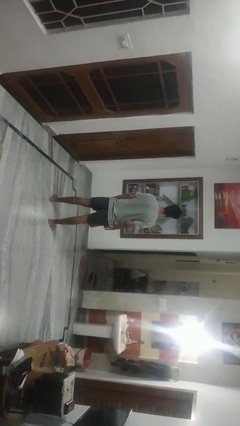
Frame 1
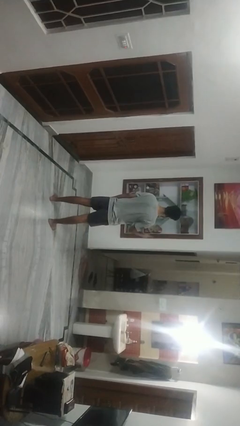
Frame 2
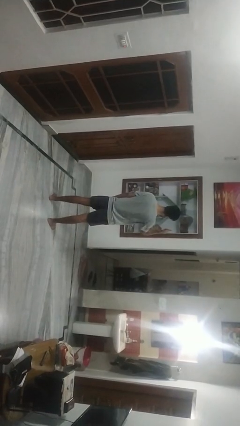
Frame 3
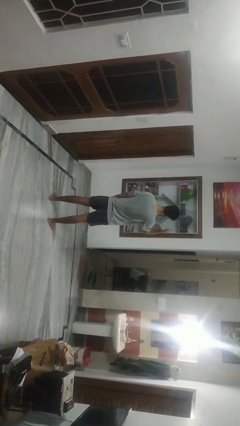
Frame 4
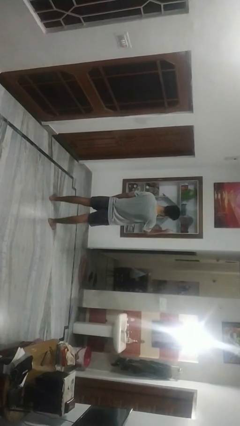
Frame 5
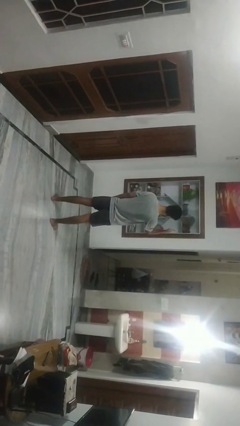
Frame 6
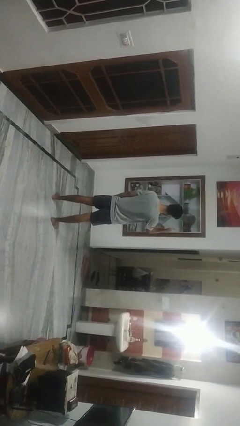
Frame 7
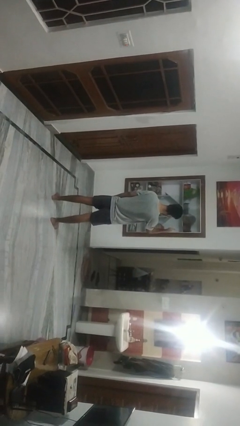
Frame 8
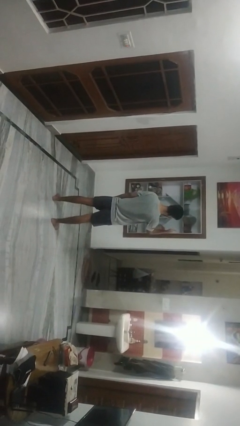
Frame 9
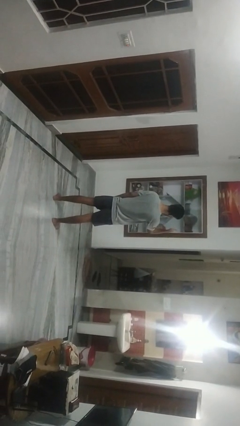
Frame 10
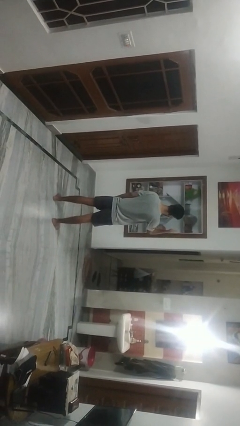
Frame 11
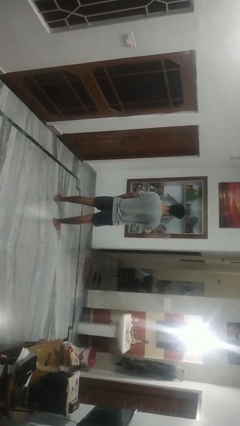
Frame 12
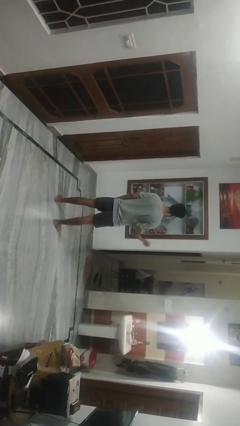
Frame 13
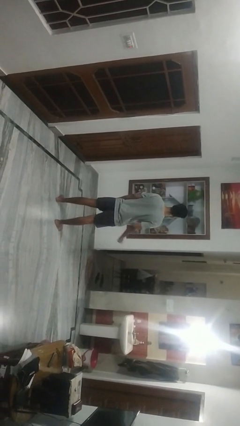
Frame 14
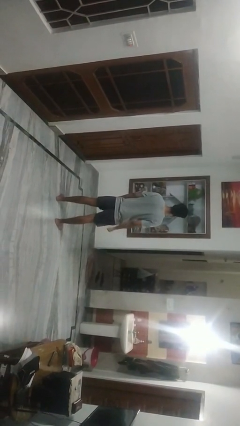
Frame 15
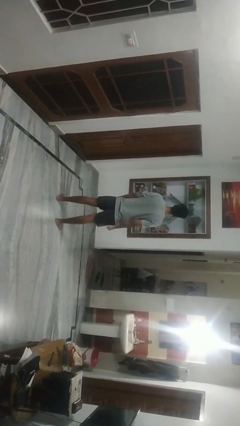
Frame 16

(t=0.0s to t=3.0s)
person gestures thumbs up

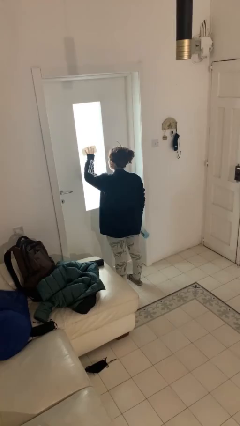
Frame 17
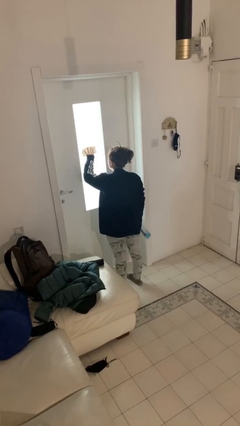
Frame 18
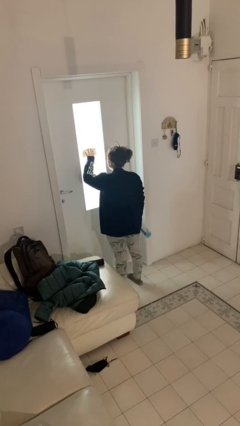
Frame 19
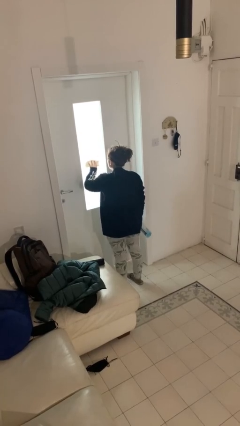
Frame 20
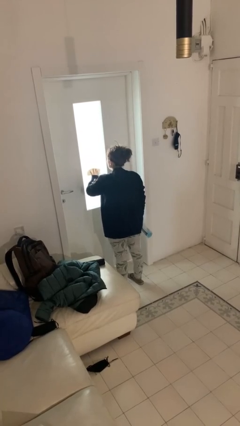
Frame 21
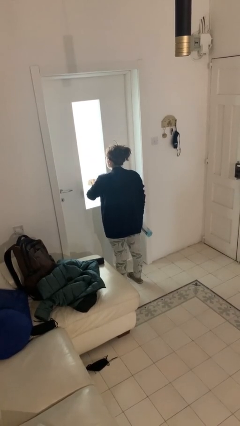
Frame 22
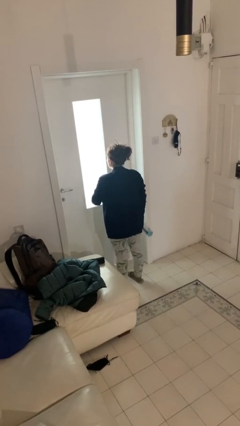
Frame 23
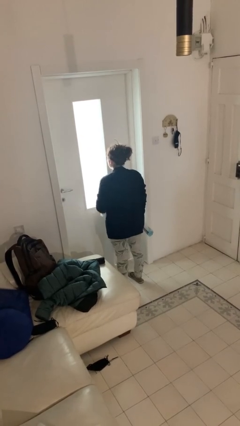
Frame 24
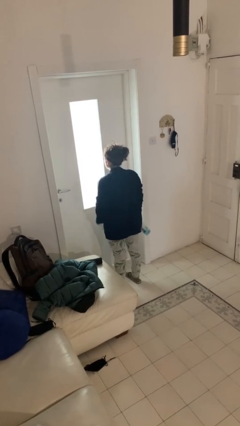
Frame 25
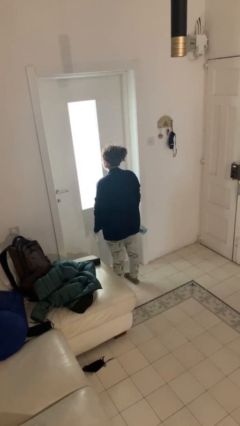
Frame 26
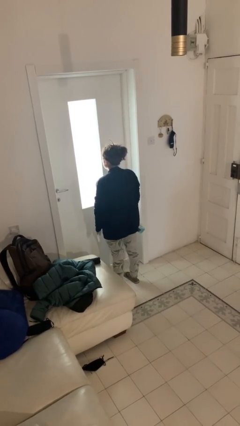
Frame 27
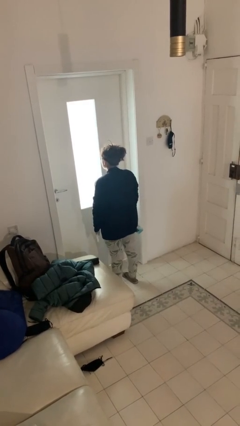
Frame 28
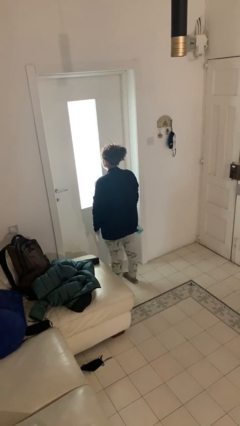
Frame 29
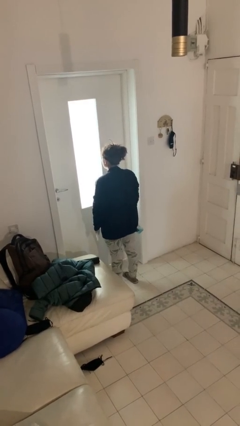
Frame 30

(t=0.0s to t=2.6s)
person washes window

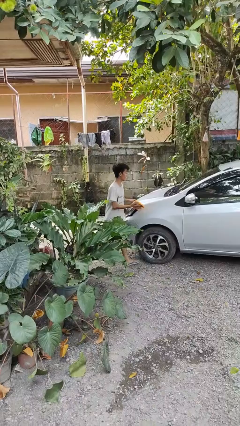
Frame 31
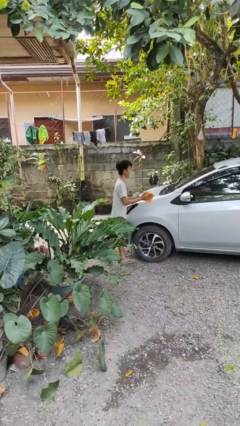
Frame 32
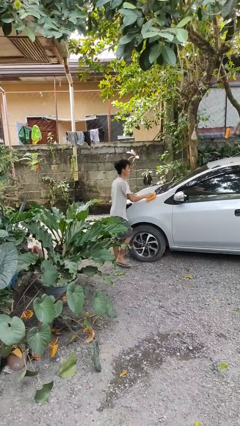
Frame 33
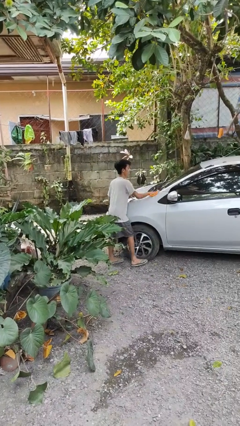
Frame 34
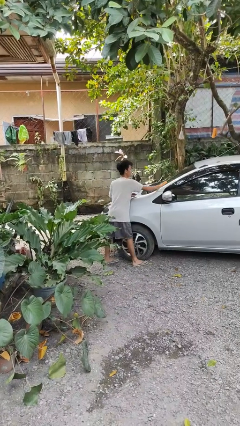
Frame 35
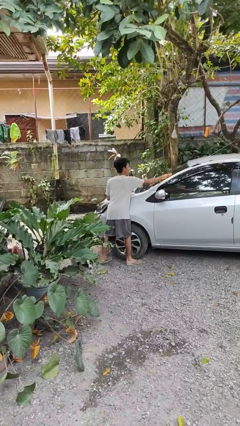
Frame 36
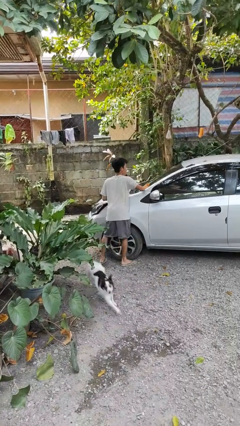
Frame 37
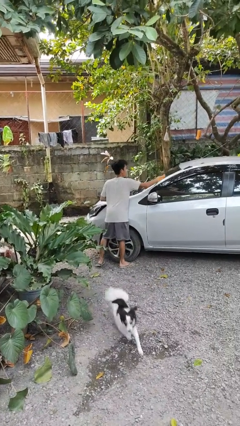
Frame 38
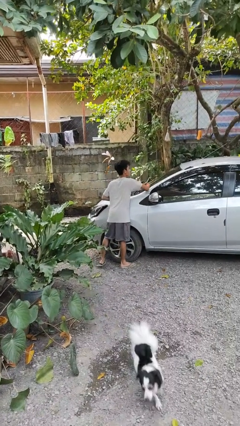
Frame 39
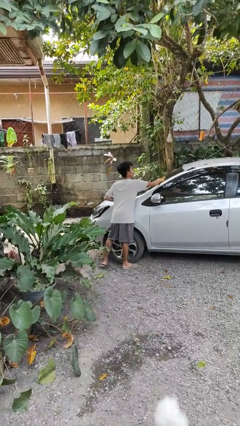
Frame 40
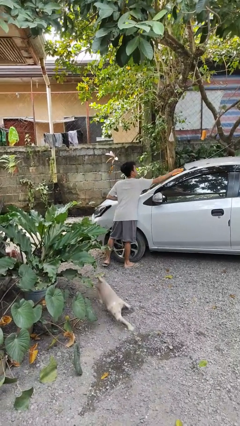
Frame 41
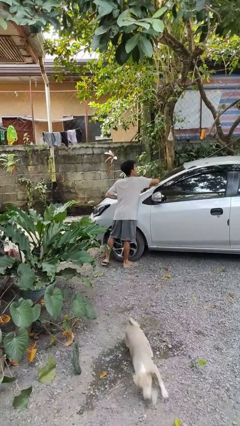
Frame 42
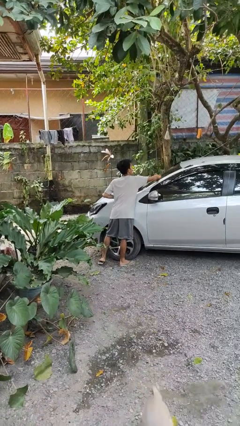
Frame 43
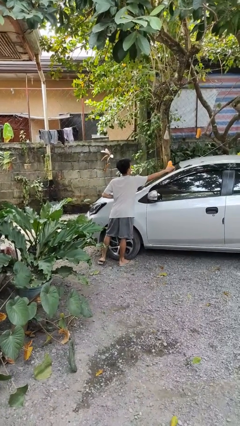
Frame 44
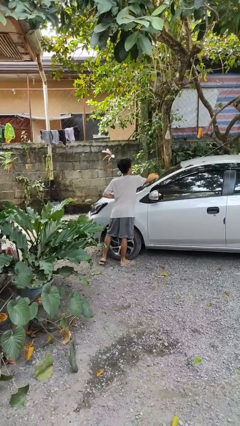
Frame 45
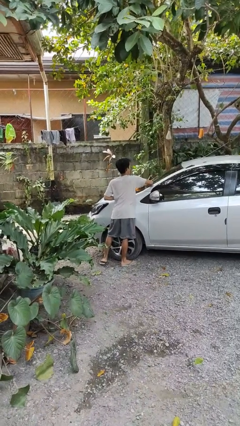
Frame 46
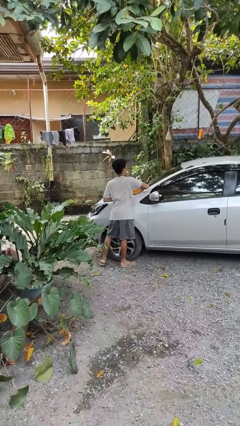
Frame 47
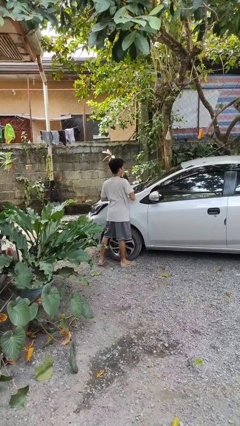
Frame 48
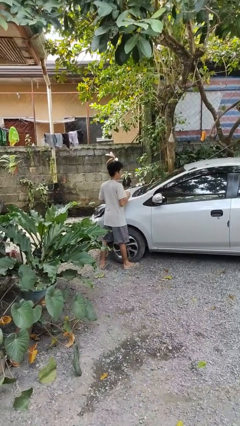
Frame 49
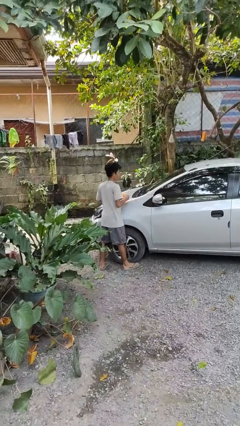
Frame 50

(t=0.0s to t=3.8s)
person polishes car with rag

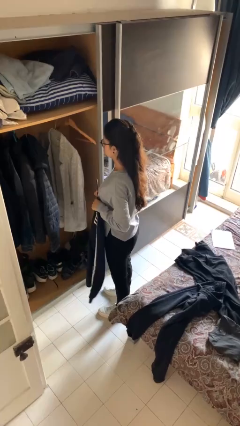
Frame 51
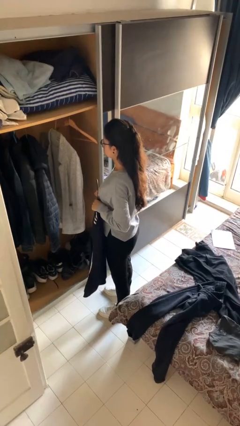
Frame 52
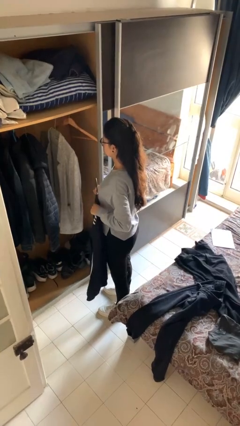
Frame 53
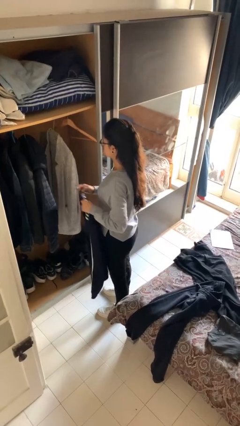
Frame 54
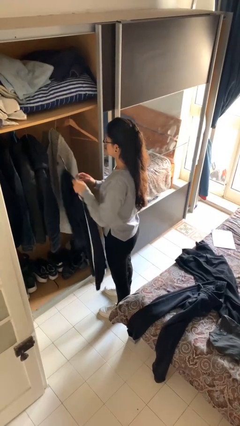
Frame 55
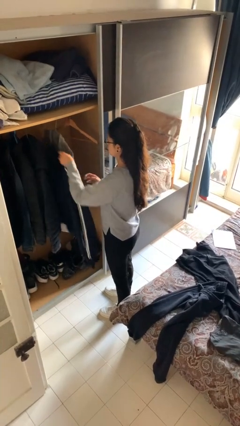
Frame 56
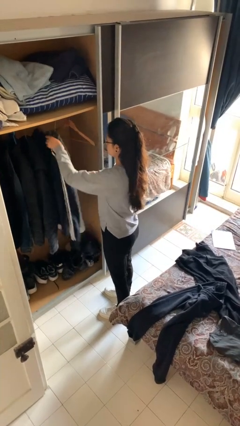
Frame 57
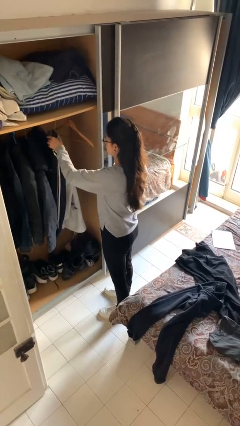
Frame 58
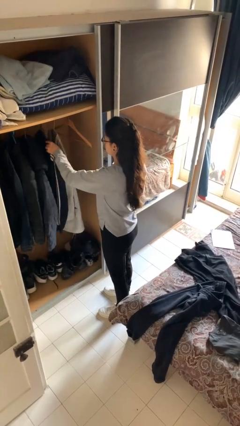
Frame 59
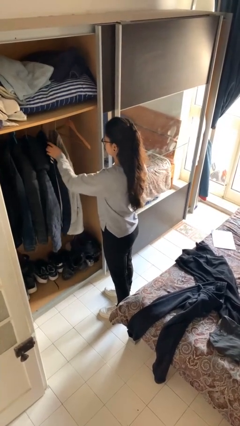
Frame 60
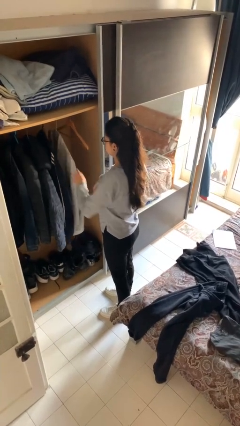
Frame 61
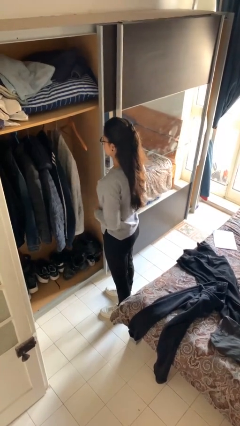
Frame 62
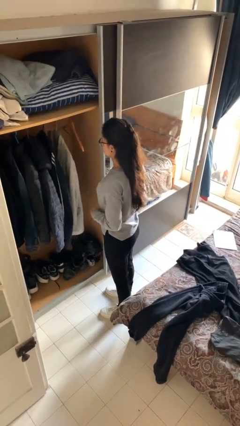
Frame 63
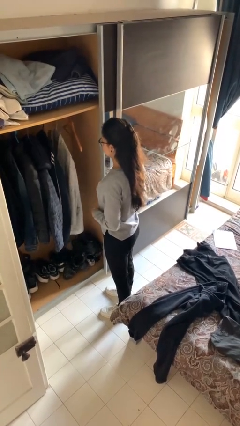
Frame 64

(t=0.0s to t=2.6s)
person puts clothes into closet

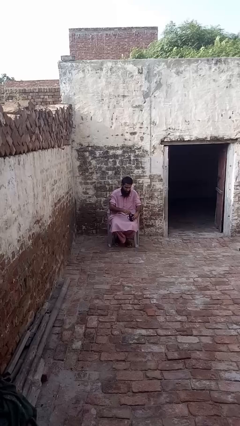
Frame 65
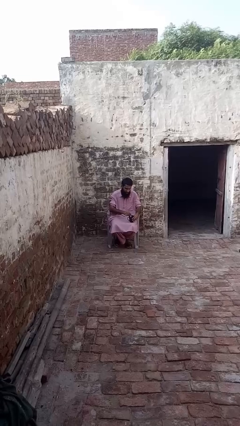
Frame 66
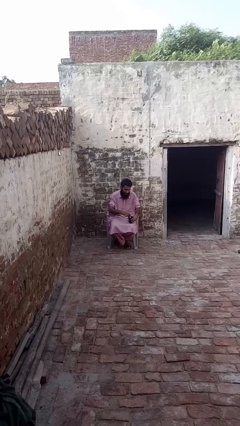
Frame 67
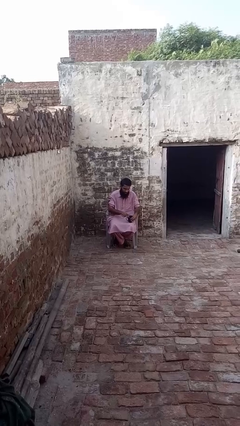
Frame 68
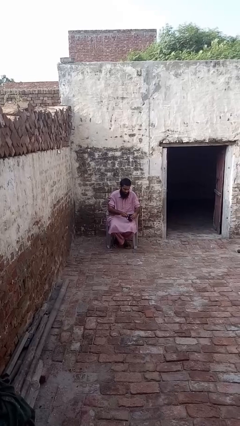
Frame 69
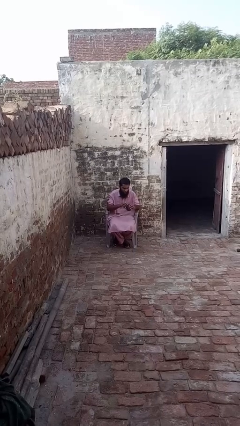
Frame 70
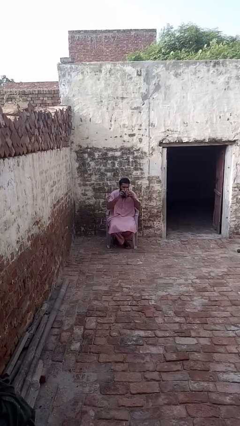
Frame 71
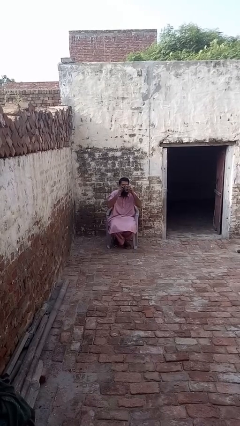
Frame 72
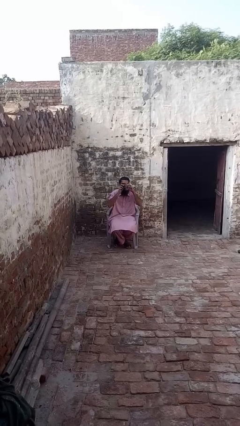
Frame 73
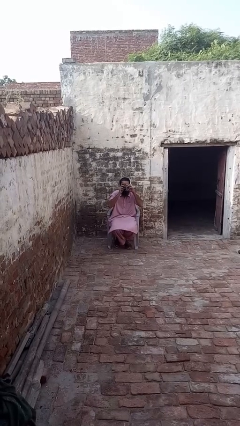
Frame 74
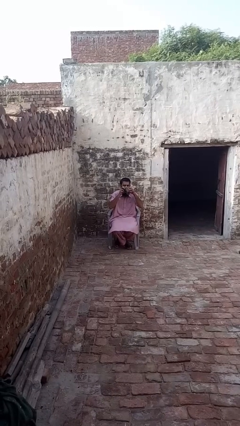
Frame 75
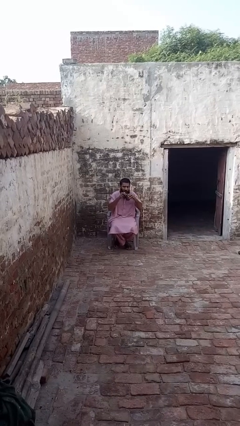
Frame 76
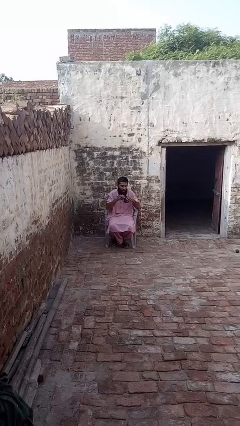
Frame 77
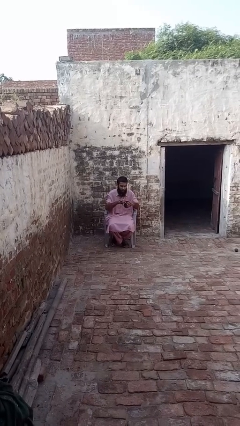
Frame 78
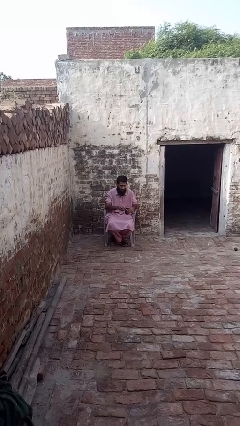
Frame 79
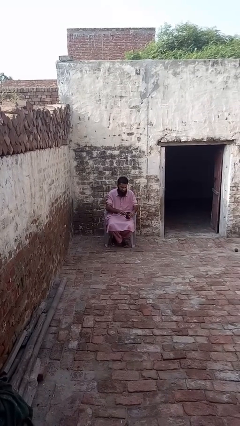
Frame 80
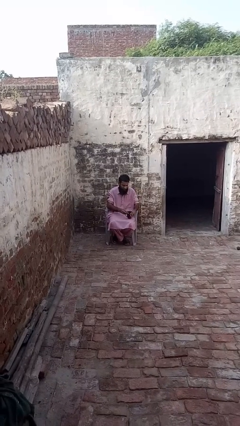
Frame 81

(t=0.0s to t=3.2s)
person drinks from mug

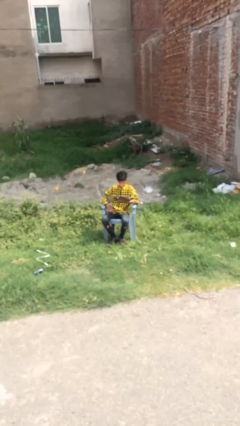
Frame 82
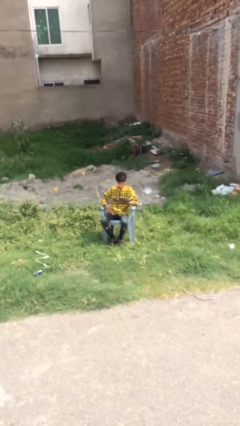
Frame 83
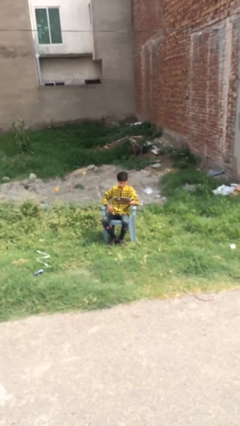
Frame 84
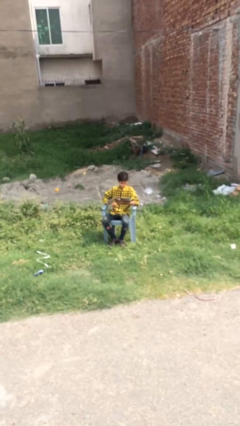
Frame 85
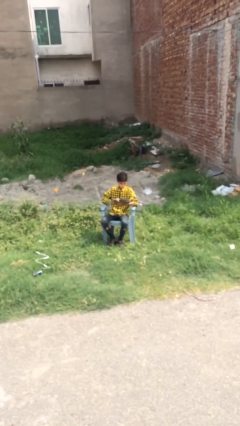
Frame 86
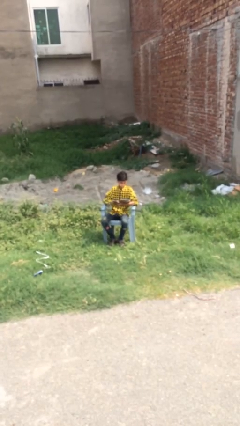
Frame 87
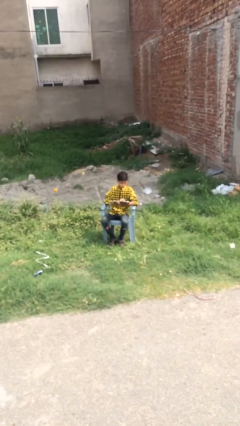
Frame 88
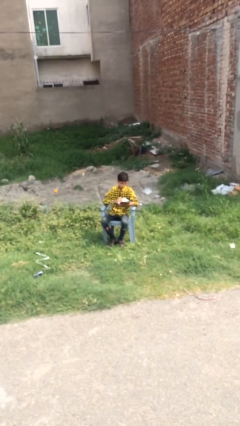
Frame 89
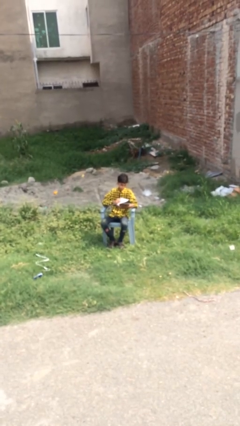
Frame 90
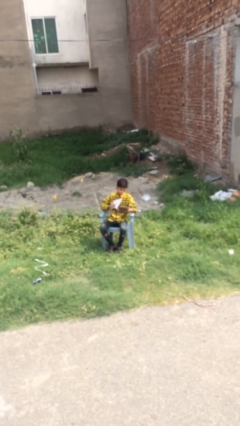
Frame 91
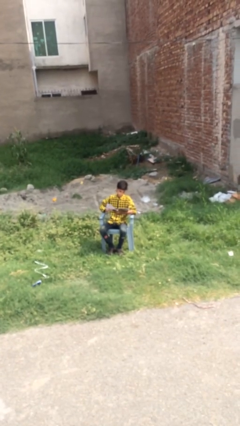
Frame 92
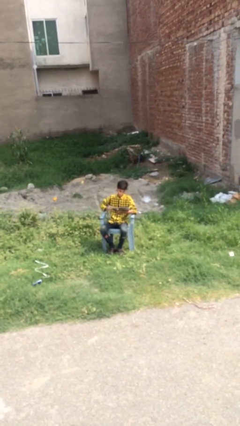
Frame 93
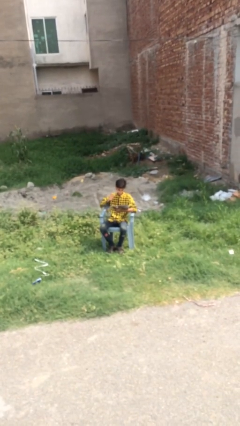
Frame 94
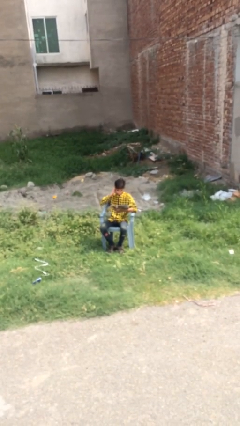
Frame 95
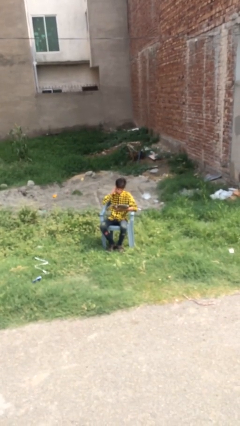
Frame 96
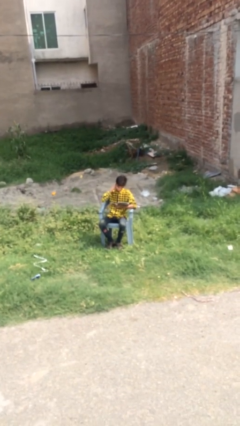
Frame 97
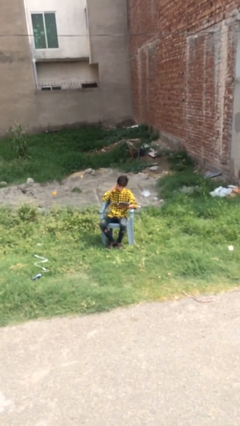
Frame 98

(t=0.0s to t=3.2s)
person reads document
